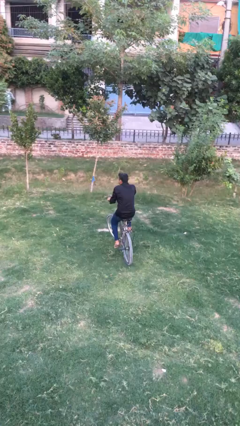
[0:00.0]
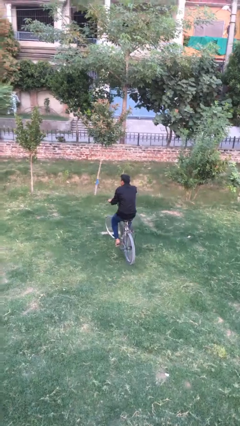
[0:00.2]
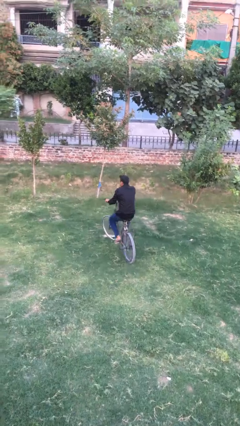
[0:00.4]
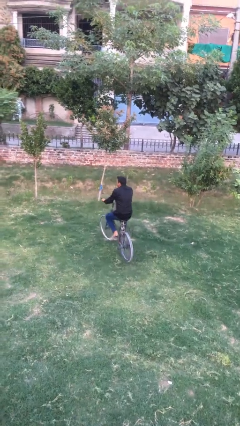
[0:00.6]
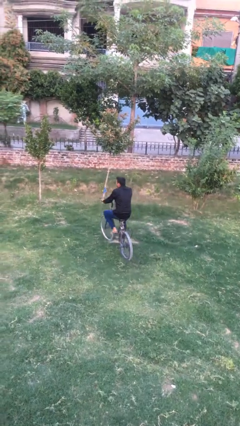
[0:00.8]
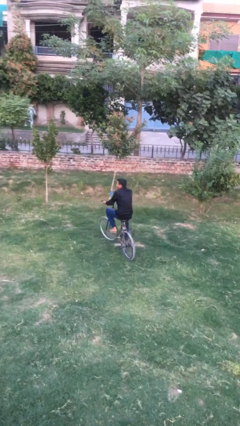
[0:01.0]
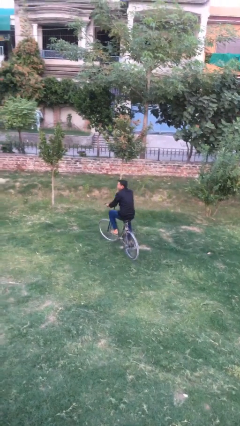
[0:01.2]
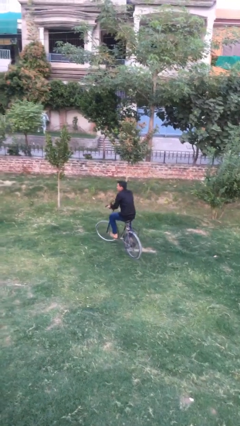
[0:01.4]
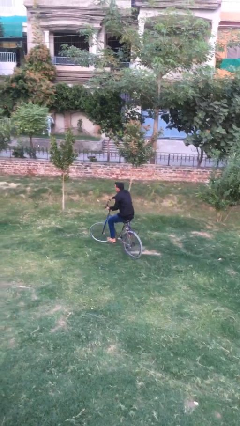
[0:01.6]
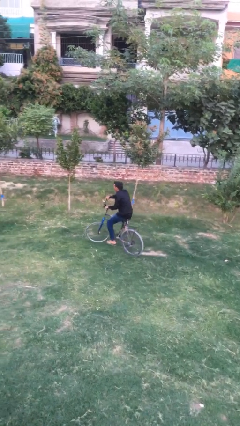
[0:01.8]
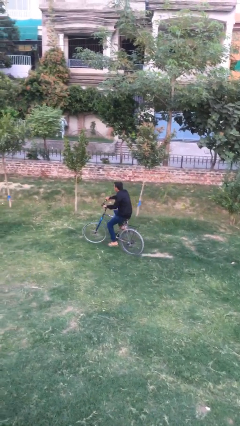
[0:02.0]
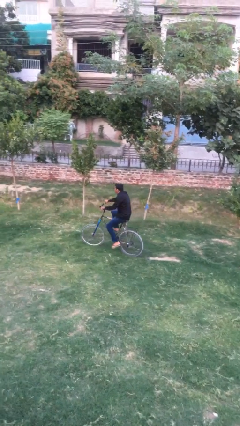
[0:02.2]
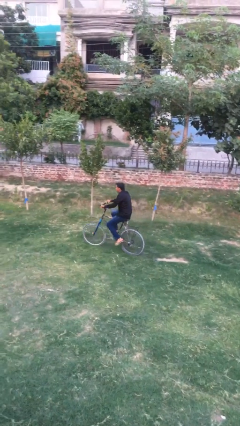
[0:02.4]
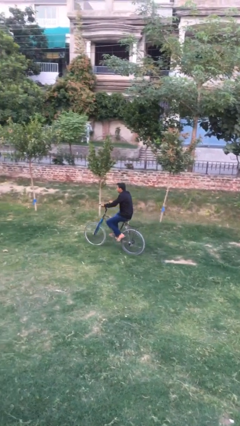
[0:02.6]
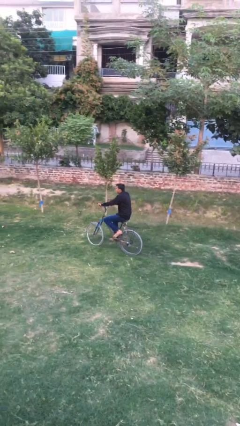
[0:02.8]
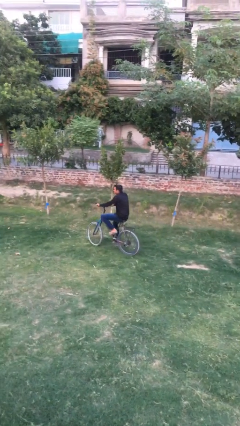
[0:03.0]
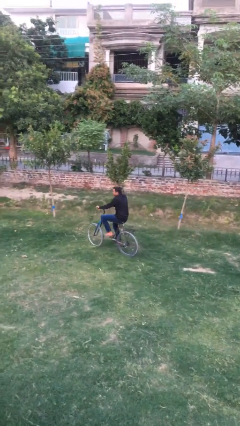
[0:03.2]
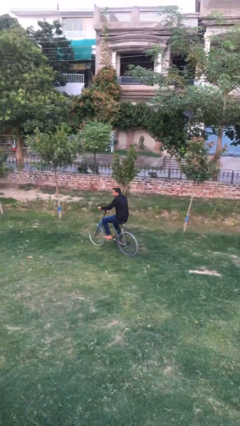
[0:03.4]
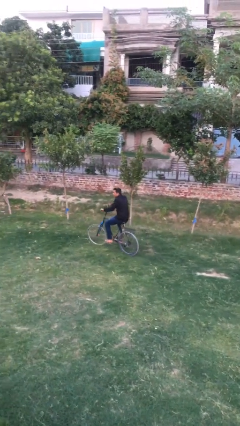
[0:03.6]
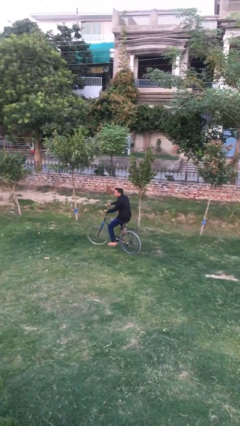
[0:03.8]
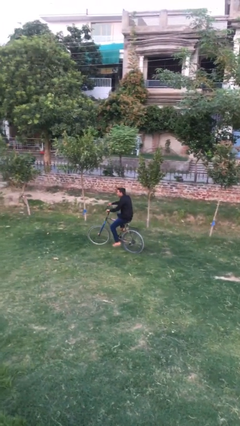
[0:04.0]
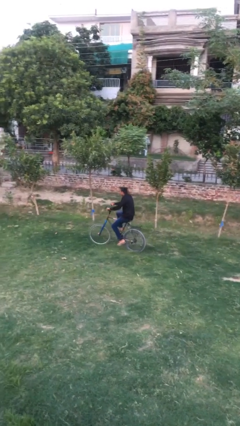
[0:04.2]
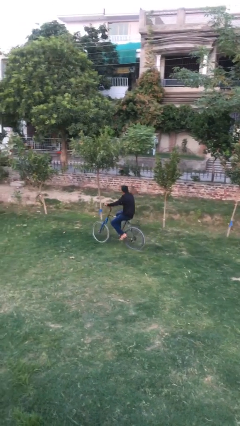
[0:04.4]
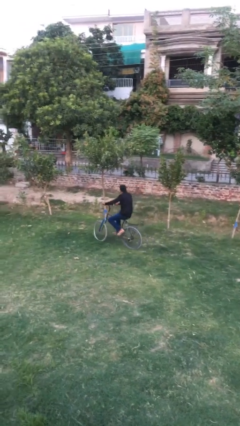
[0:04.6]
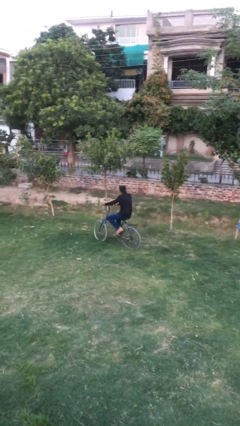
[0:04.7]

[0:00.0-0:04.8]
person rides bicycle

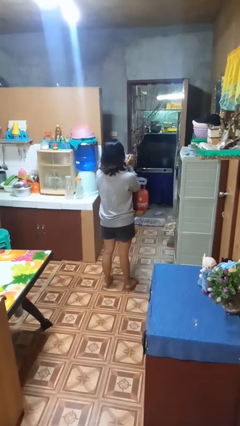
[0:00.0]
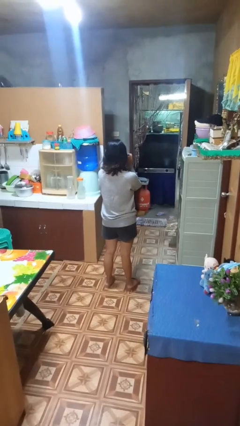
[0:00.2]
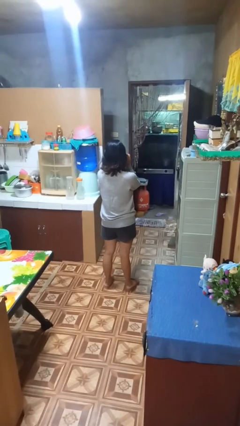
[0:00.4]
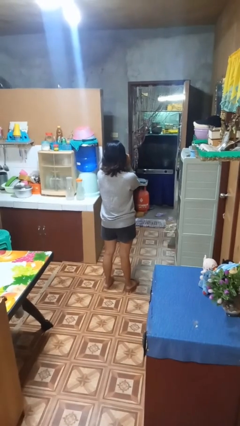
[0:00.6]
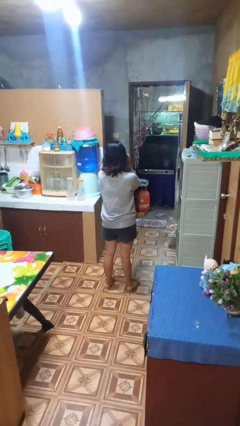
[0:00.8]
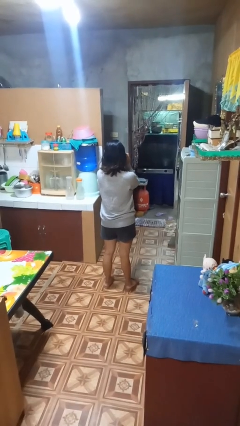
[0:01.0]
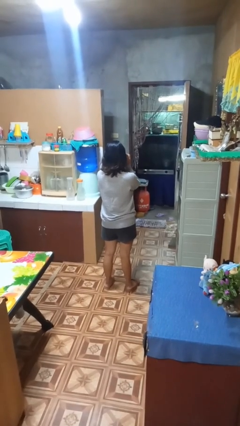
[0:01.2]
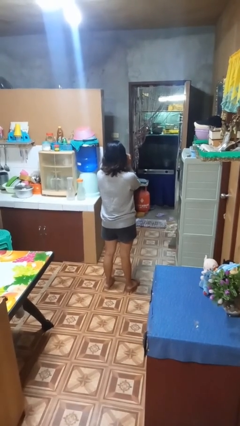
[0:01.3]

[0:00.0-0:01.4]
person drinks from mug

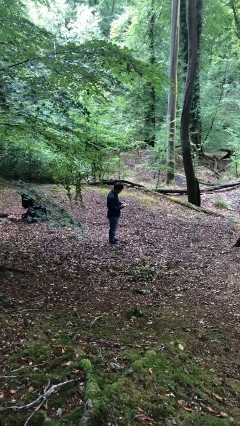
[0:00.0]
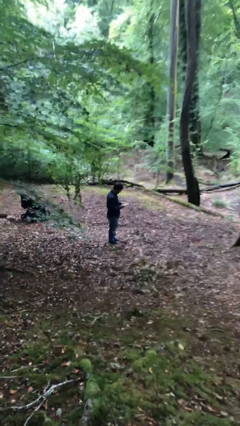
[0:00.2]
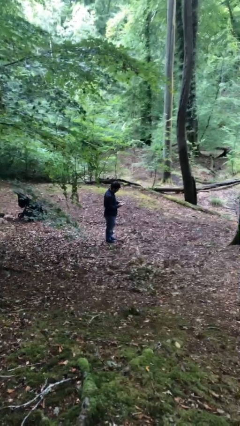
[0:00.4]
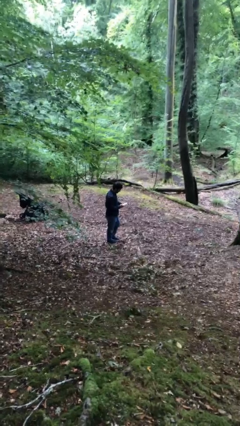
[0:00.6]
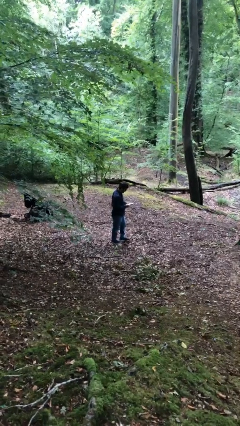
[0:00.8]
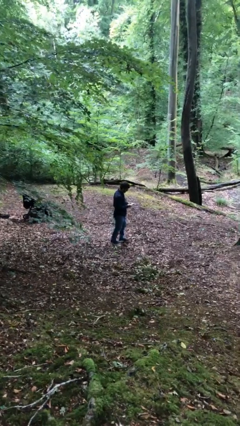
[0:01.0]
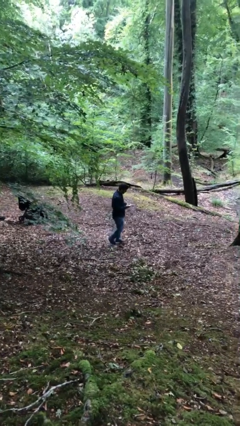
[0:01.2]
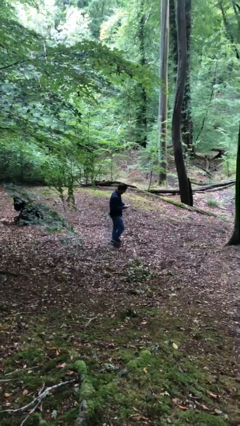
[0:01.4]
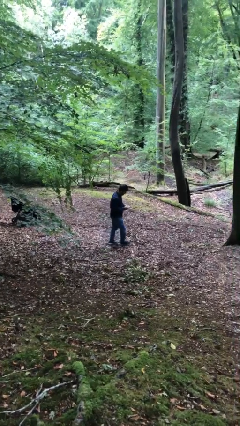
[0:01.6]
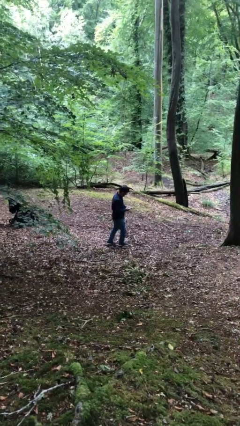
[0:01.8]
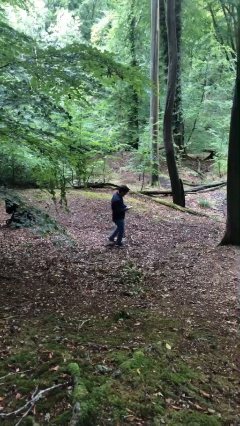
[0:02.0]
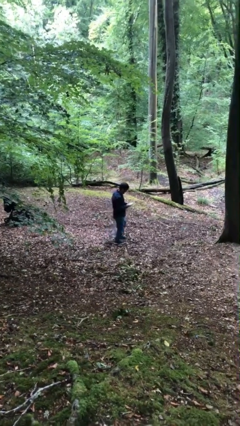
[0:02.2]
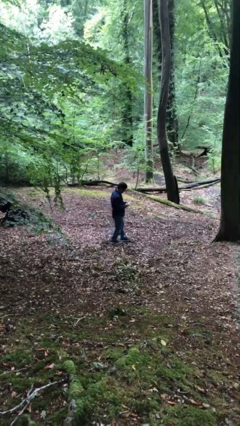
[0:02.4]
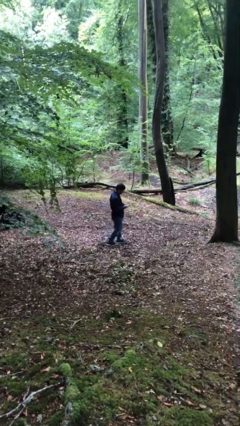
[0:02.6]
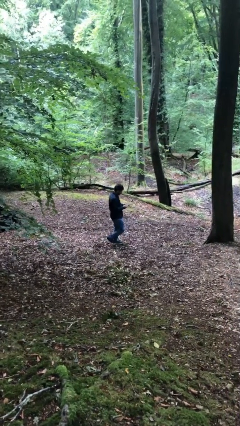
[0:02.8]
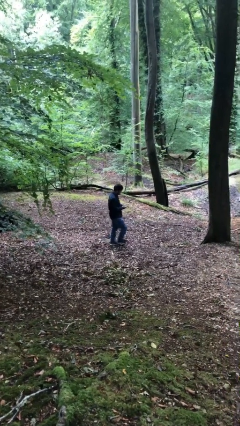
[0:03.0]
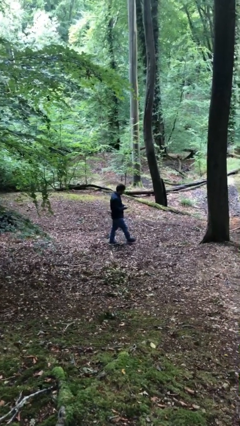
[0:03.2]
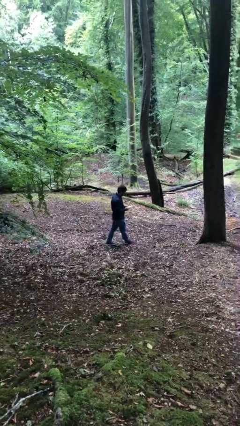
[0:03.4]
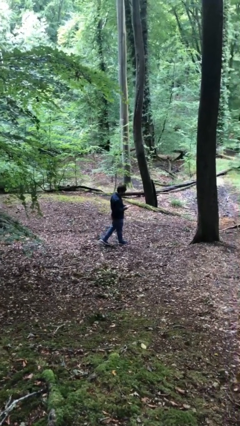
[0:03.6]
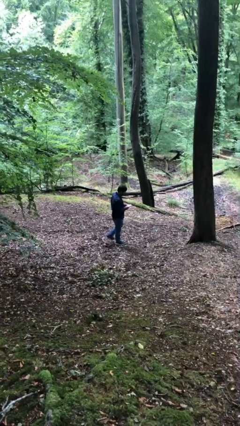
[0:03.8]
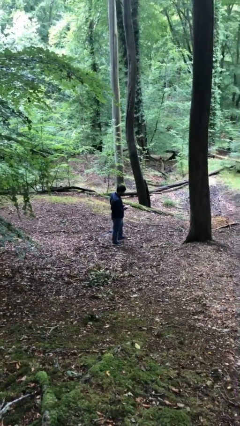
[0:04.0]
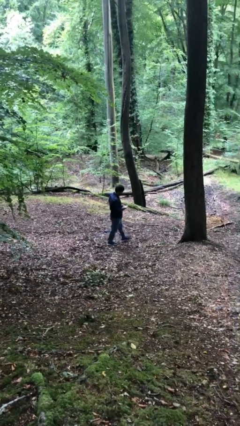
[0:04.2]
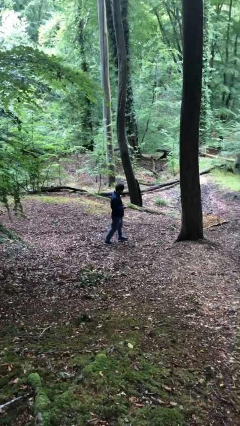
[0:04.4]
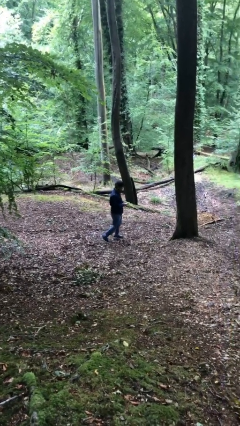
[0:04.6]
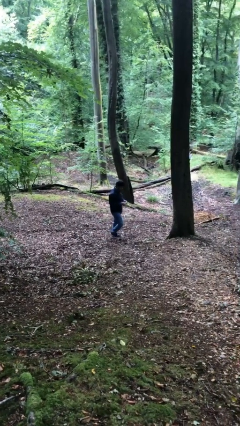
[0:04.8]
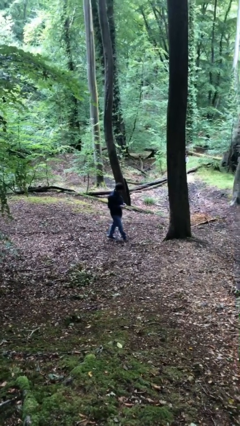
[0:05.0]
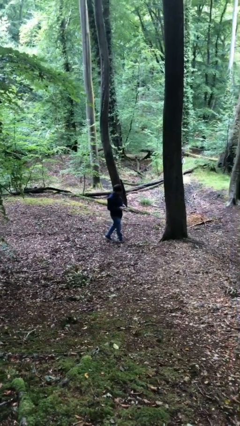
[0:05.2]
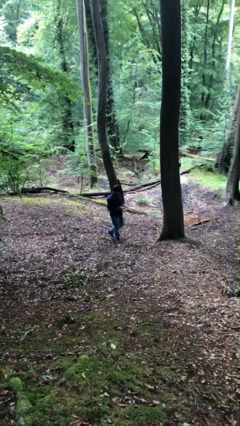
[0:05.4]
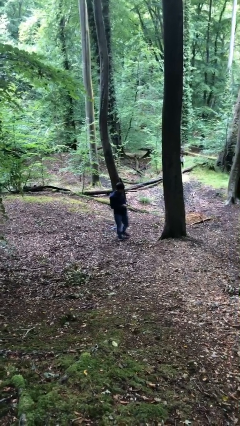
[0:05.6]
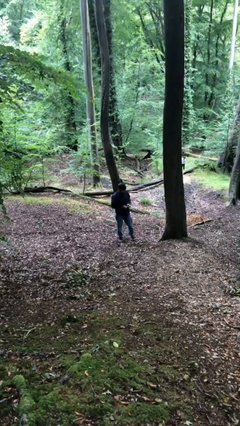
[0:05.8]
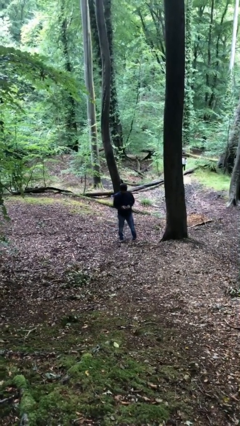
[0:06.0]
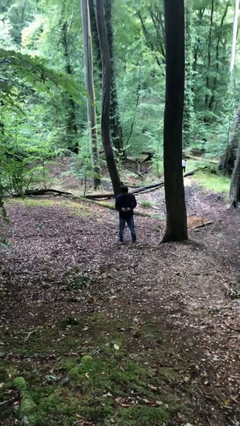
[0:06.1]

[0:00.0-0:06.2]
person texts on phone

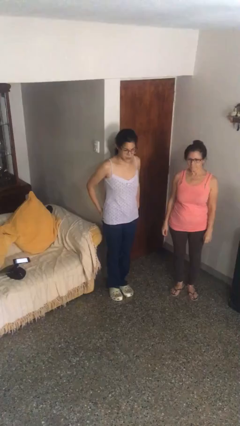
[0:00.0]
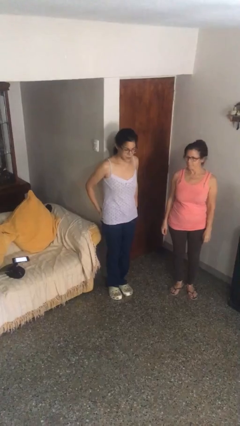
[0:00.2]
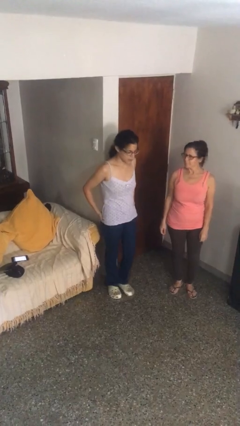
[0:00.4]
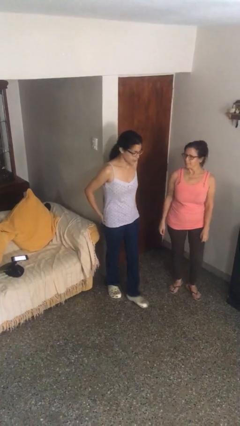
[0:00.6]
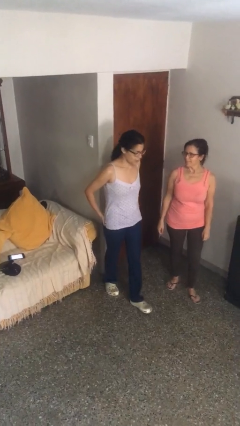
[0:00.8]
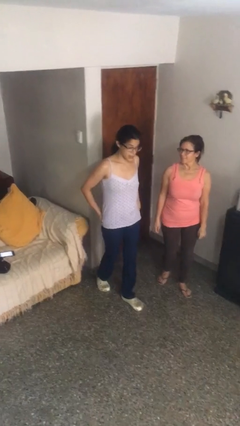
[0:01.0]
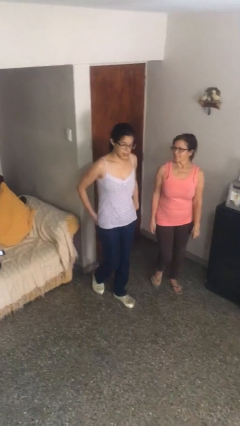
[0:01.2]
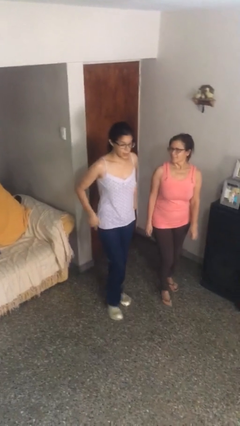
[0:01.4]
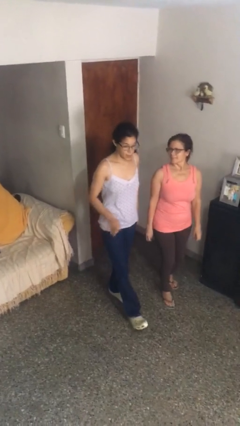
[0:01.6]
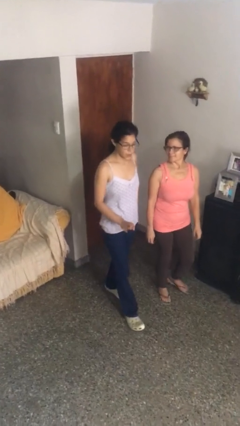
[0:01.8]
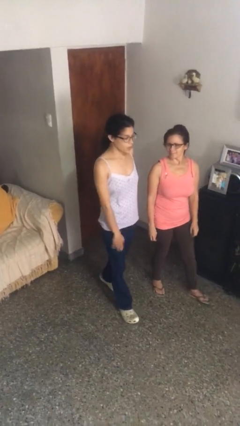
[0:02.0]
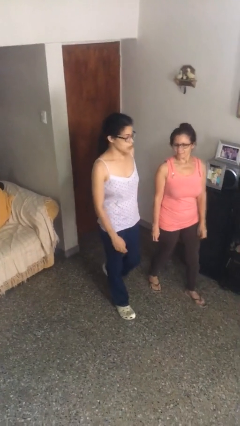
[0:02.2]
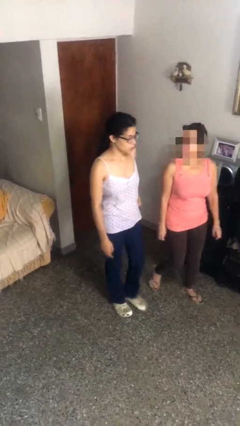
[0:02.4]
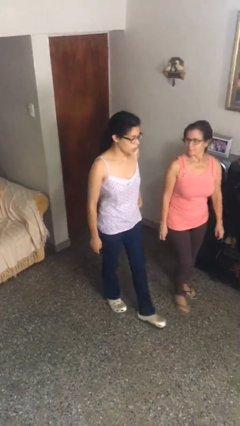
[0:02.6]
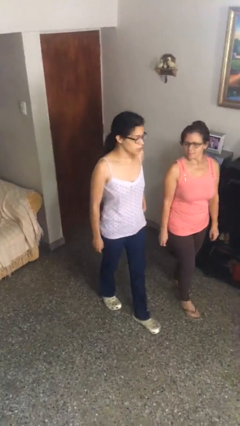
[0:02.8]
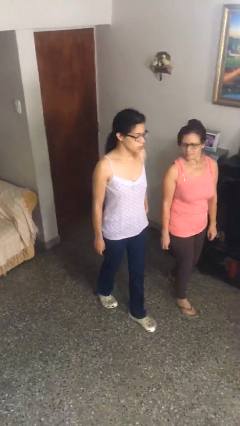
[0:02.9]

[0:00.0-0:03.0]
person talks to person

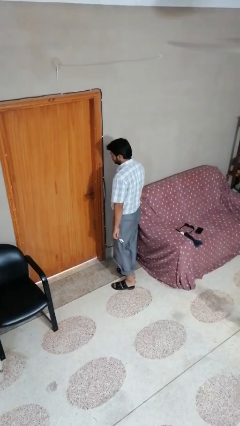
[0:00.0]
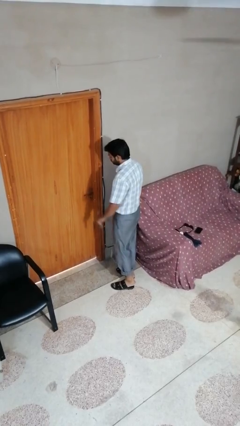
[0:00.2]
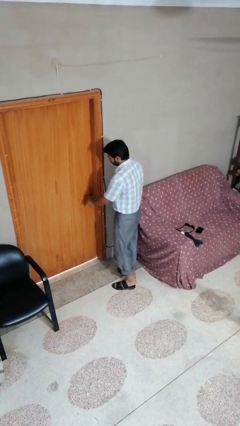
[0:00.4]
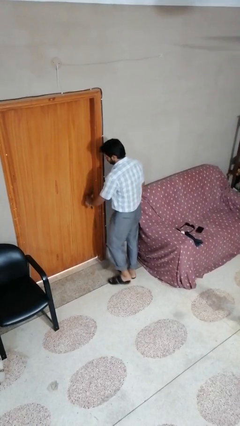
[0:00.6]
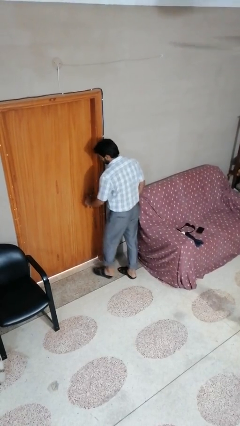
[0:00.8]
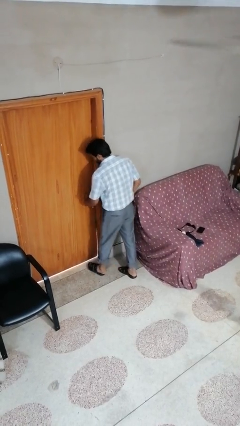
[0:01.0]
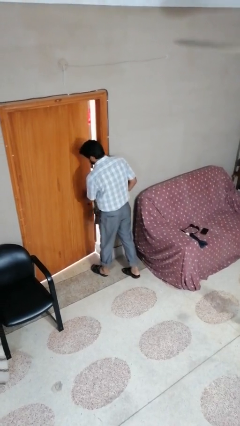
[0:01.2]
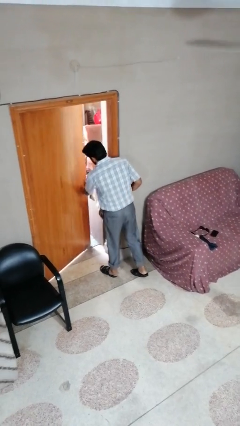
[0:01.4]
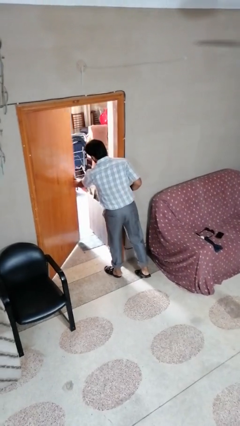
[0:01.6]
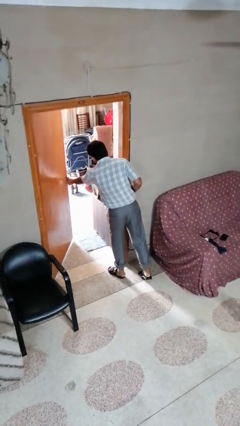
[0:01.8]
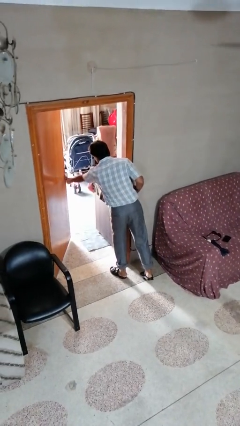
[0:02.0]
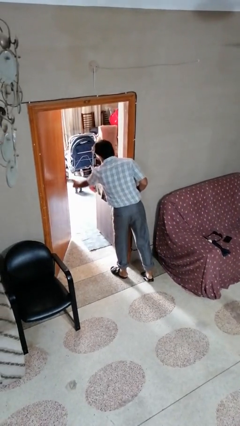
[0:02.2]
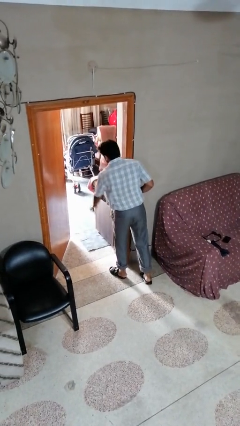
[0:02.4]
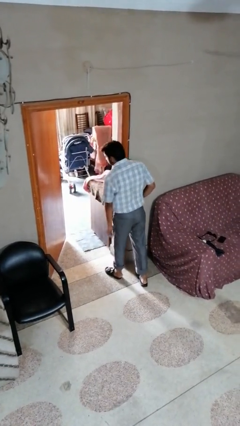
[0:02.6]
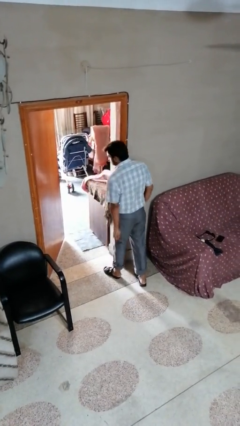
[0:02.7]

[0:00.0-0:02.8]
person opens facility door
